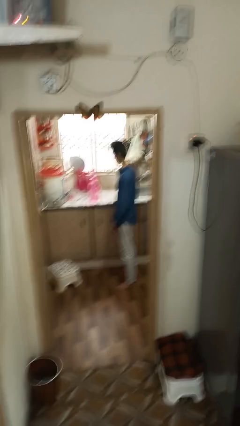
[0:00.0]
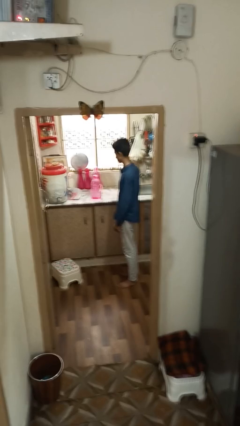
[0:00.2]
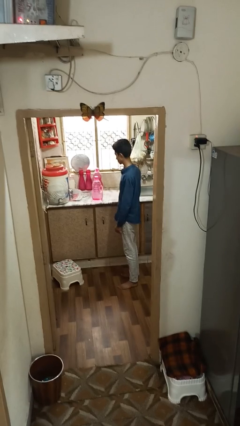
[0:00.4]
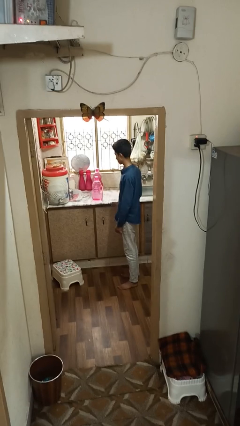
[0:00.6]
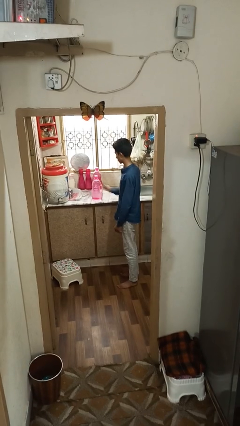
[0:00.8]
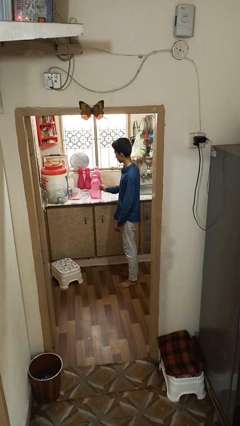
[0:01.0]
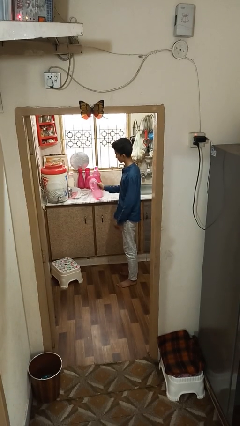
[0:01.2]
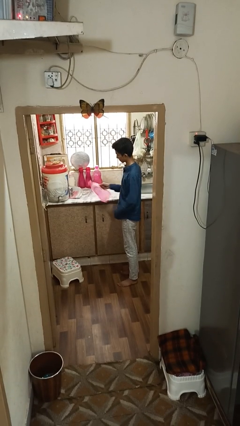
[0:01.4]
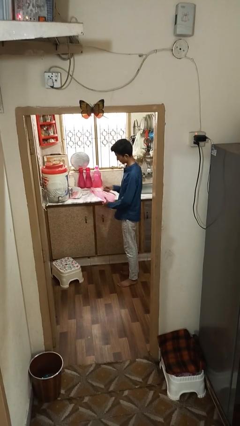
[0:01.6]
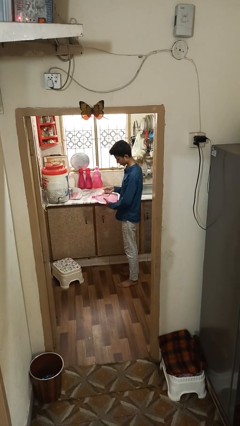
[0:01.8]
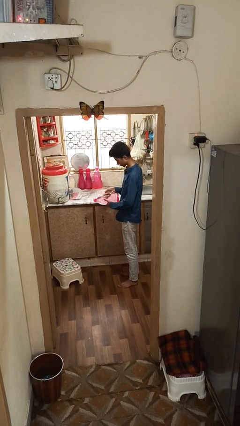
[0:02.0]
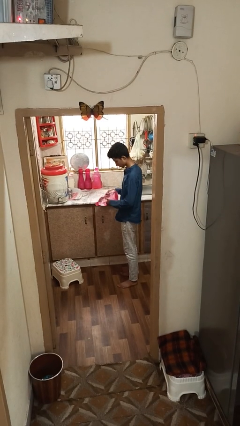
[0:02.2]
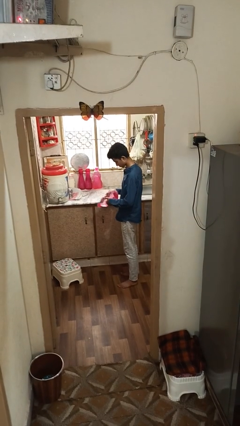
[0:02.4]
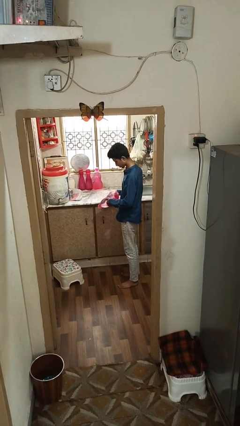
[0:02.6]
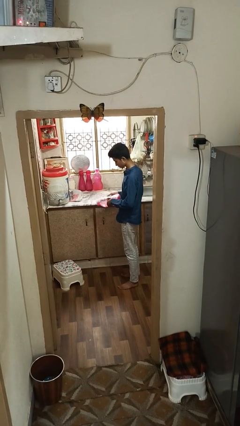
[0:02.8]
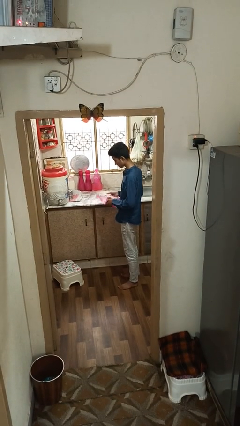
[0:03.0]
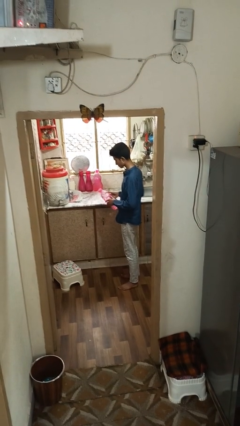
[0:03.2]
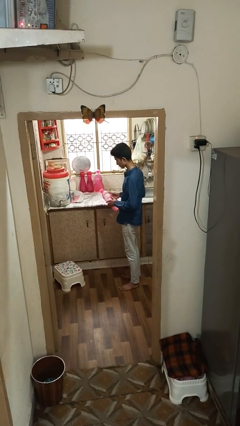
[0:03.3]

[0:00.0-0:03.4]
person picks up object from countertop

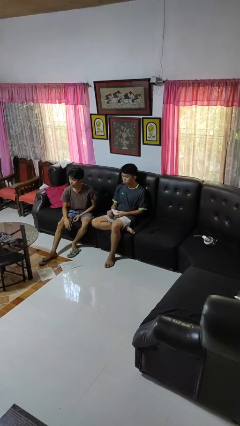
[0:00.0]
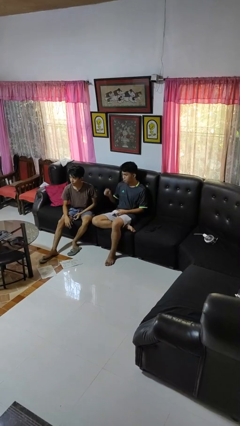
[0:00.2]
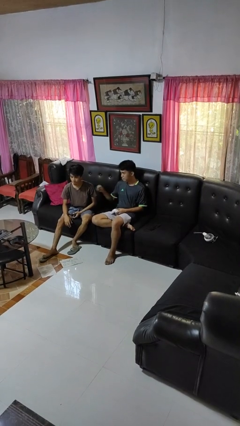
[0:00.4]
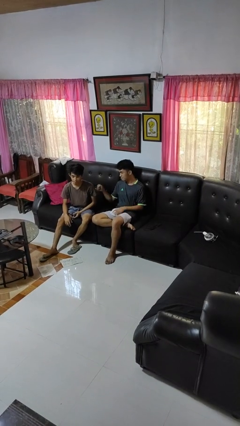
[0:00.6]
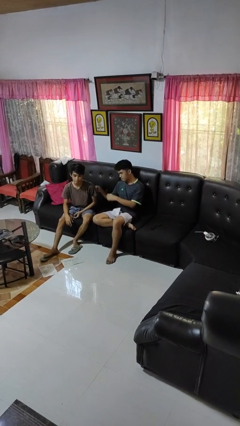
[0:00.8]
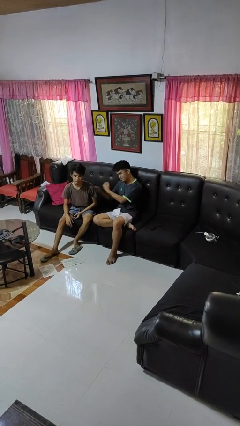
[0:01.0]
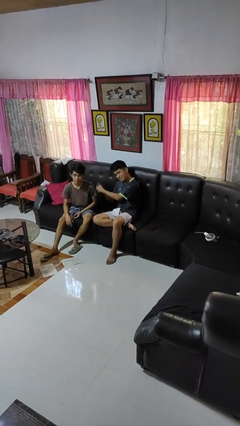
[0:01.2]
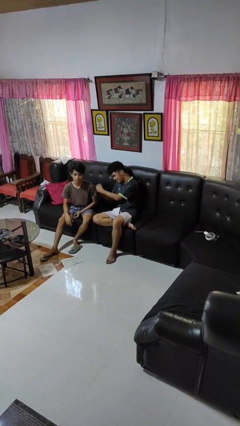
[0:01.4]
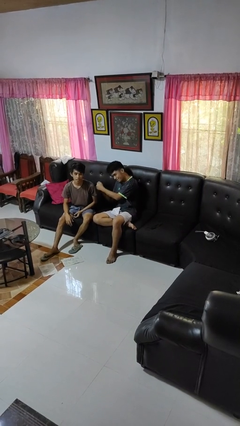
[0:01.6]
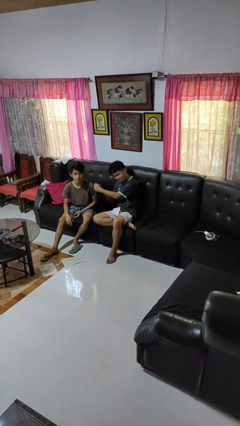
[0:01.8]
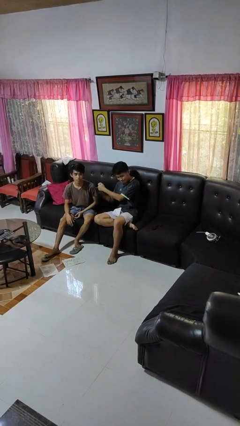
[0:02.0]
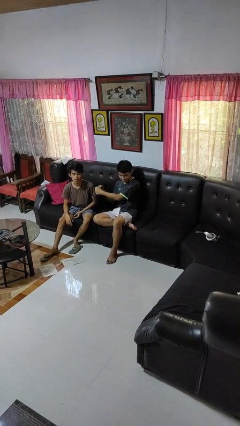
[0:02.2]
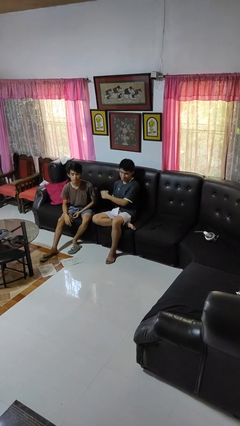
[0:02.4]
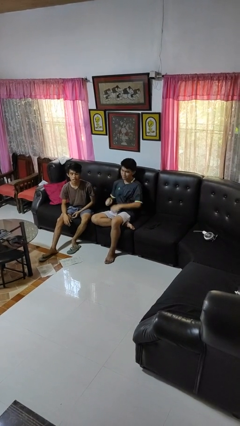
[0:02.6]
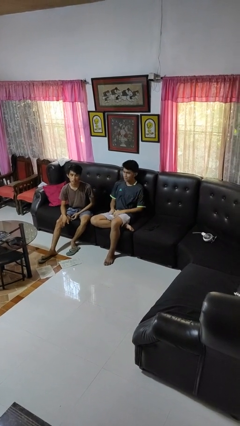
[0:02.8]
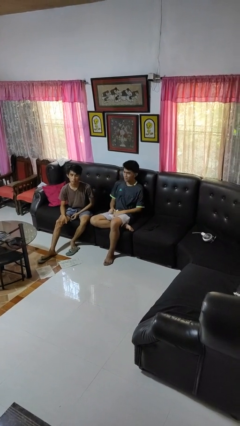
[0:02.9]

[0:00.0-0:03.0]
person pounds shoulders of person

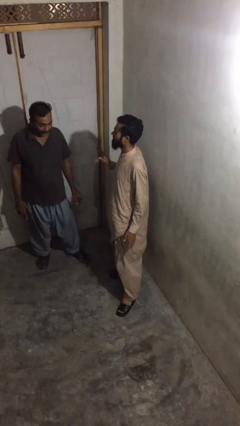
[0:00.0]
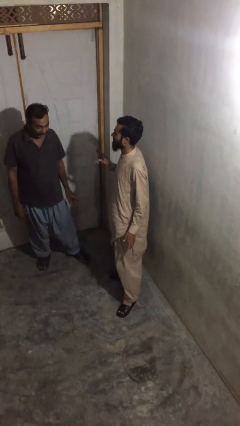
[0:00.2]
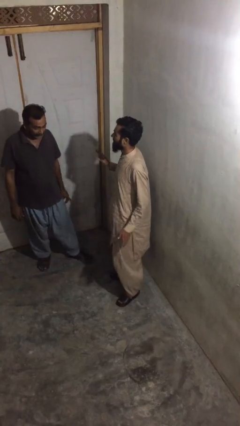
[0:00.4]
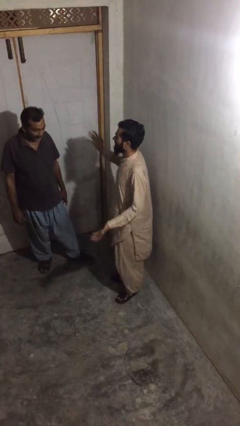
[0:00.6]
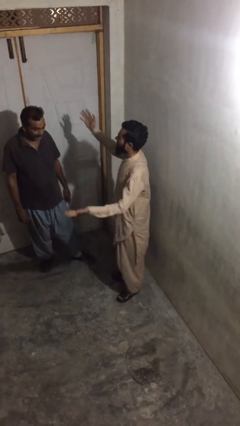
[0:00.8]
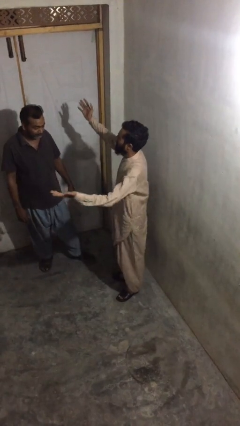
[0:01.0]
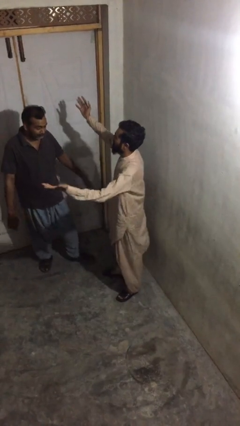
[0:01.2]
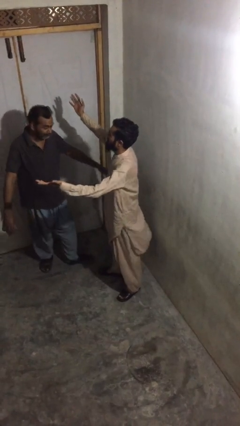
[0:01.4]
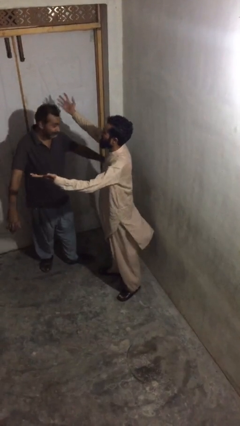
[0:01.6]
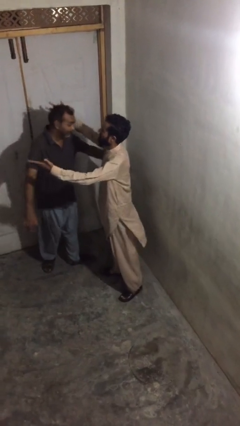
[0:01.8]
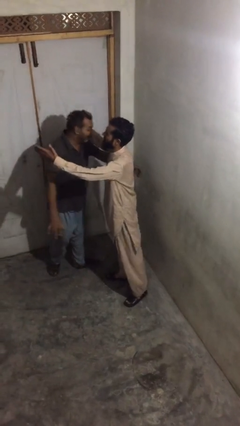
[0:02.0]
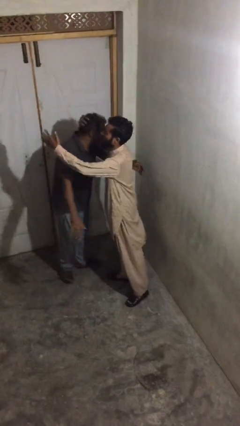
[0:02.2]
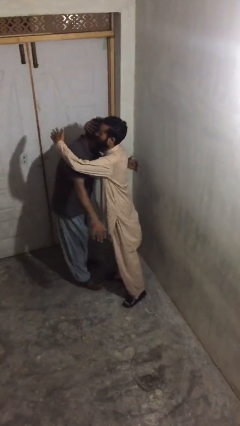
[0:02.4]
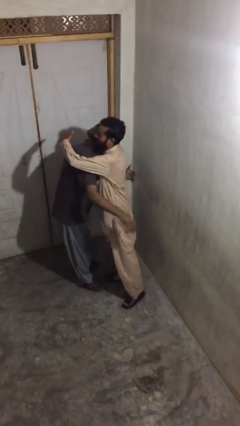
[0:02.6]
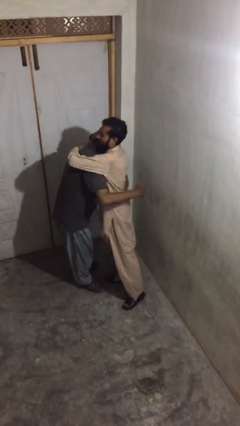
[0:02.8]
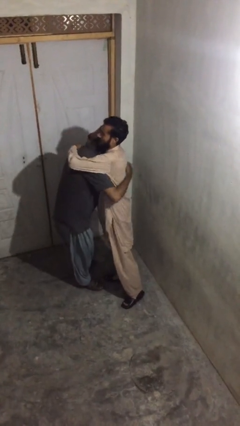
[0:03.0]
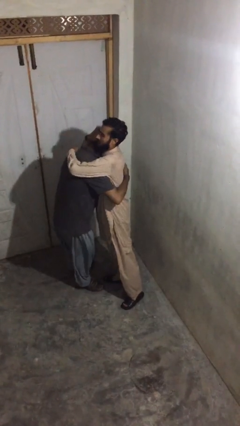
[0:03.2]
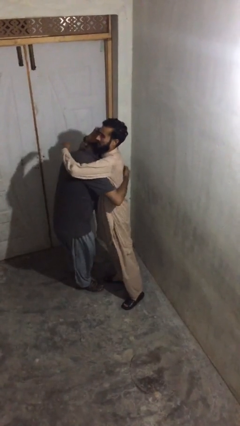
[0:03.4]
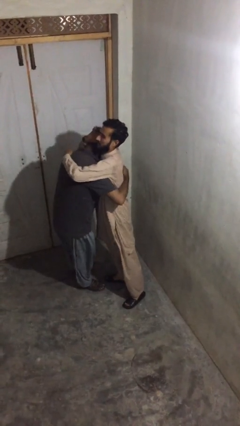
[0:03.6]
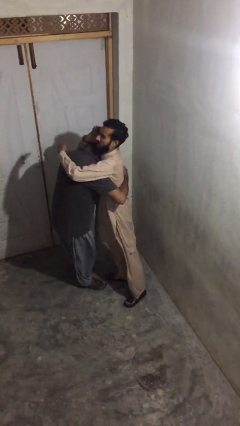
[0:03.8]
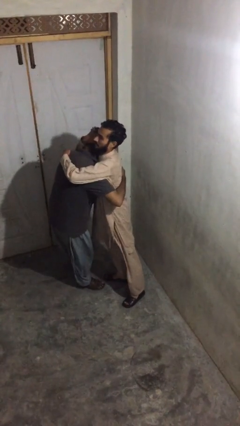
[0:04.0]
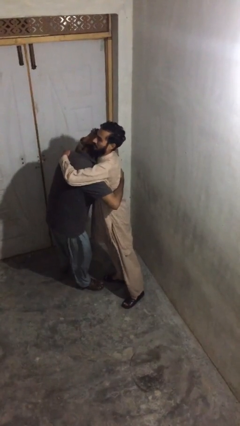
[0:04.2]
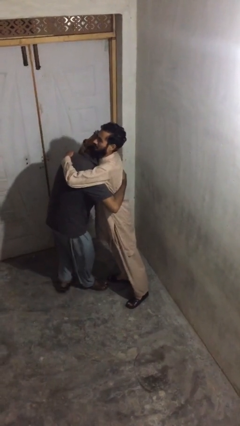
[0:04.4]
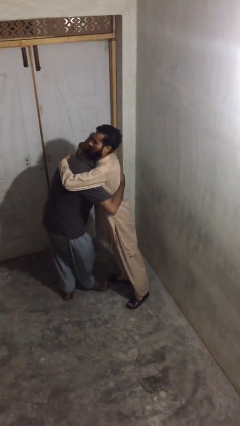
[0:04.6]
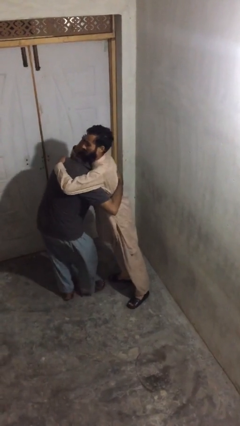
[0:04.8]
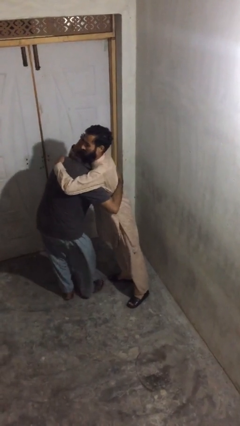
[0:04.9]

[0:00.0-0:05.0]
person embraces person

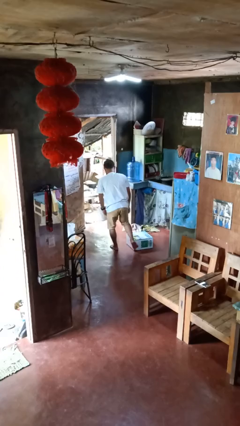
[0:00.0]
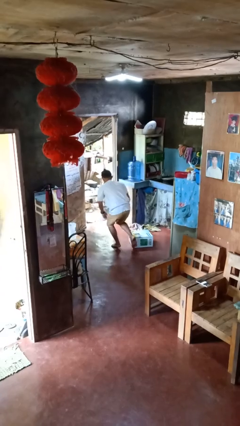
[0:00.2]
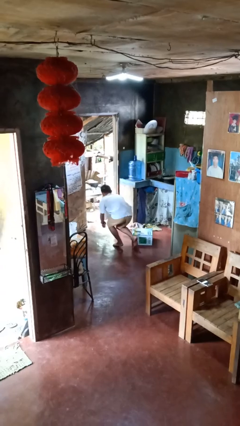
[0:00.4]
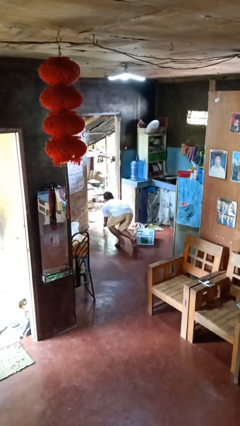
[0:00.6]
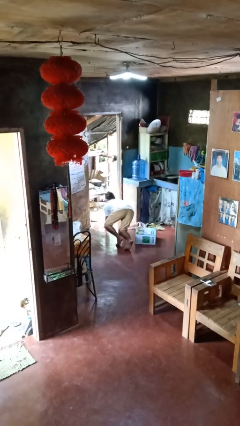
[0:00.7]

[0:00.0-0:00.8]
person trips on object on floor

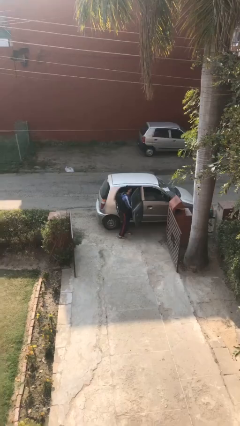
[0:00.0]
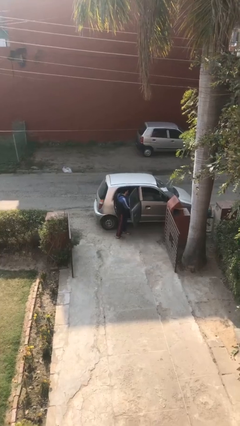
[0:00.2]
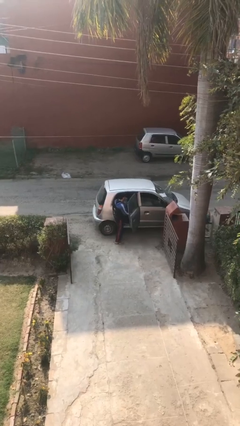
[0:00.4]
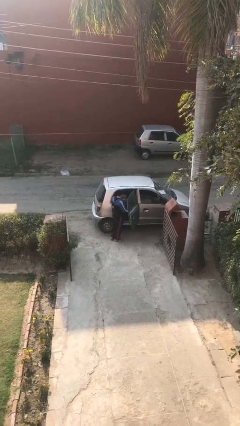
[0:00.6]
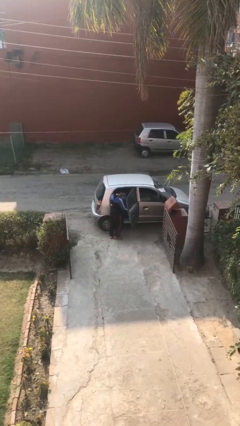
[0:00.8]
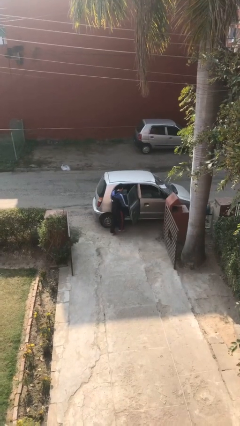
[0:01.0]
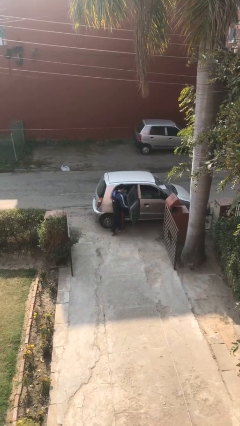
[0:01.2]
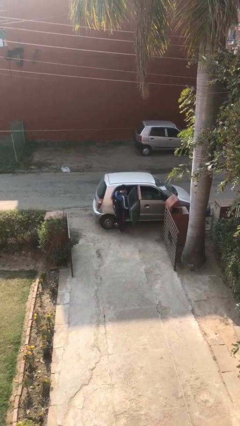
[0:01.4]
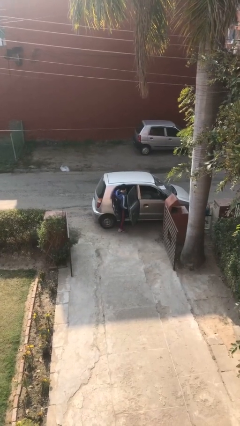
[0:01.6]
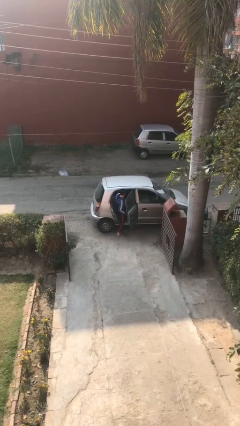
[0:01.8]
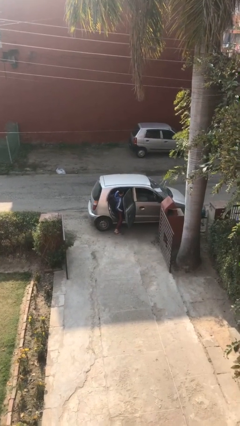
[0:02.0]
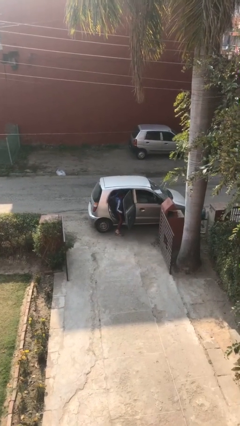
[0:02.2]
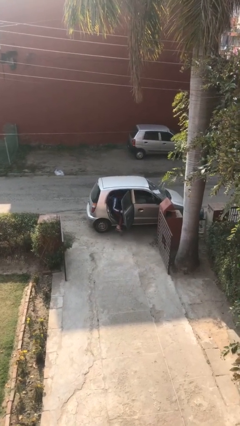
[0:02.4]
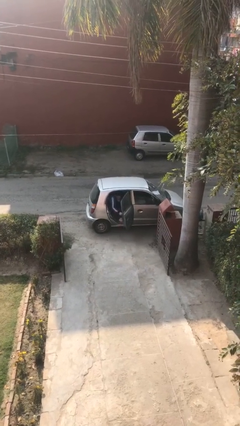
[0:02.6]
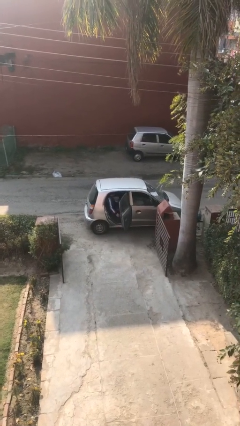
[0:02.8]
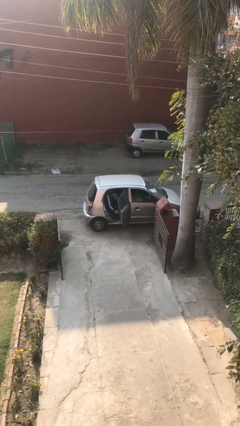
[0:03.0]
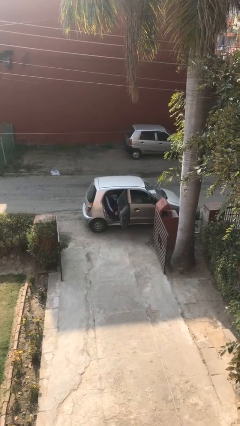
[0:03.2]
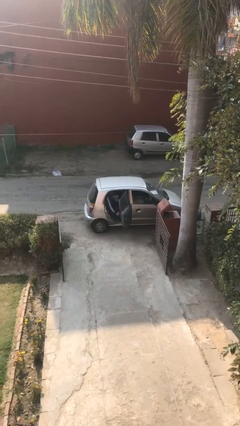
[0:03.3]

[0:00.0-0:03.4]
person enters car

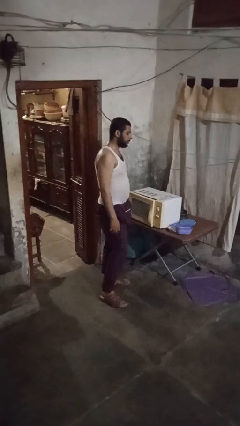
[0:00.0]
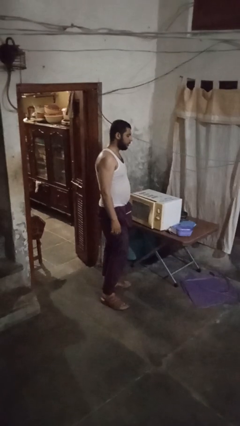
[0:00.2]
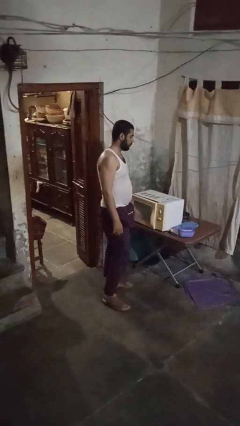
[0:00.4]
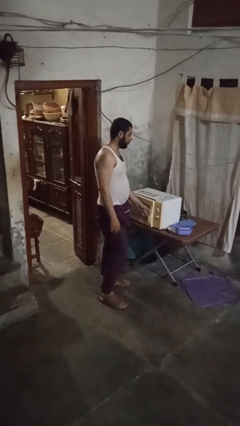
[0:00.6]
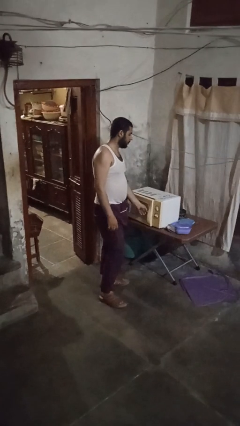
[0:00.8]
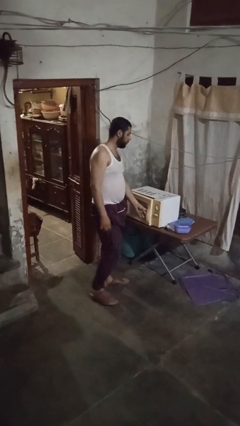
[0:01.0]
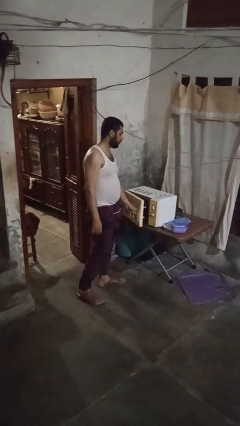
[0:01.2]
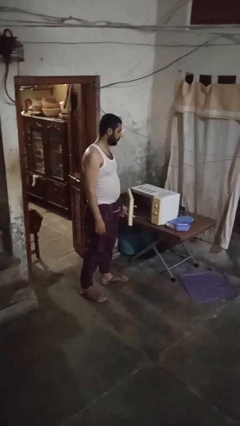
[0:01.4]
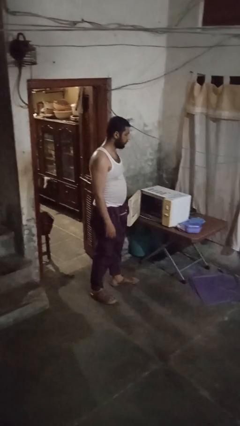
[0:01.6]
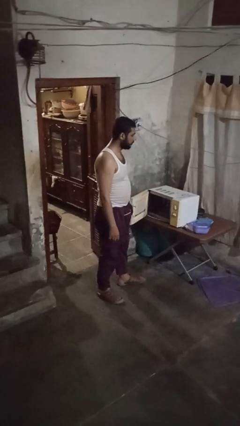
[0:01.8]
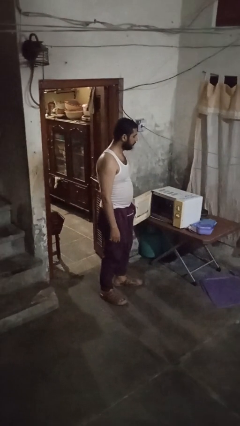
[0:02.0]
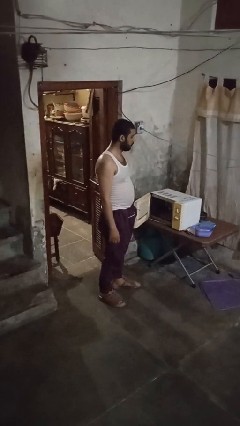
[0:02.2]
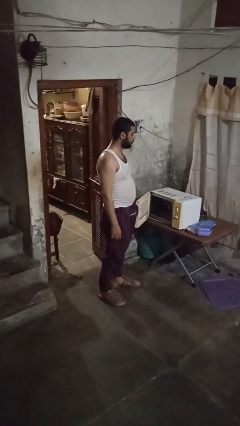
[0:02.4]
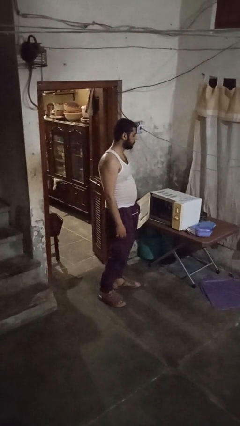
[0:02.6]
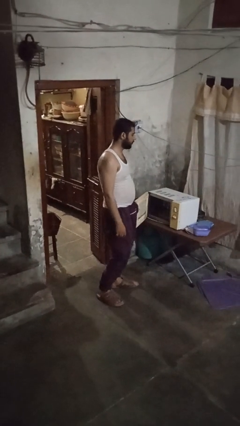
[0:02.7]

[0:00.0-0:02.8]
person opens microwave
